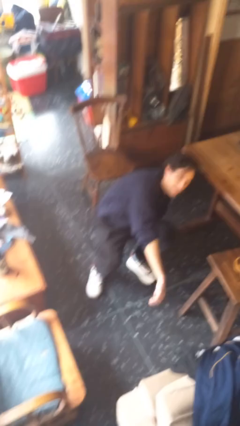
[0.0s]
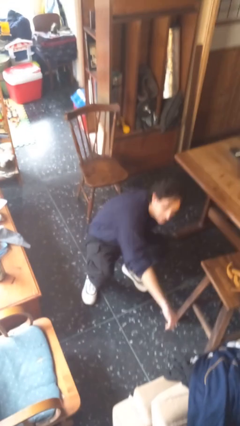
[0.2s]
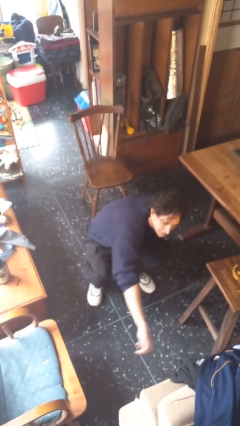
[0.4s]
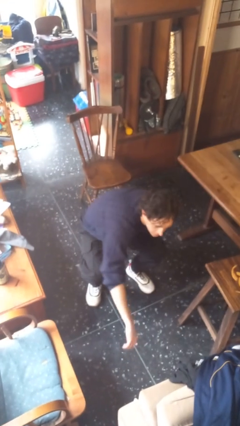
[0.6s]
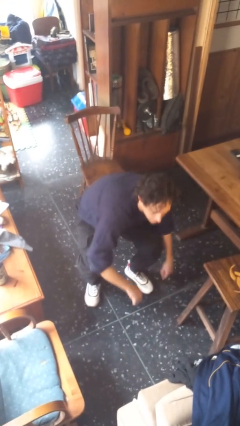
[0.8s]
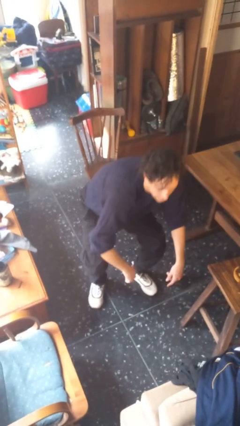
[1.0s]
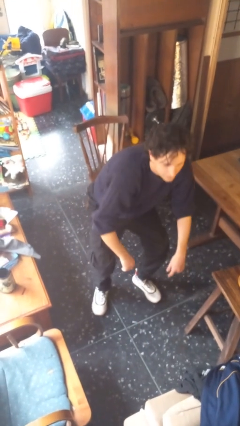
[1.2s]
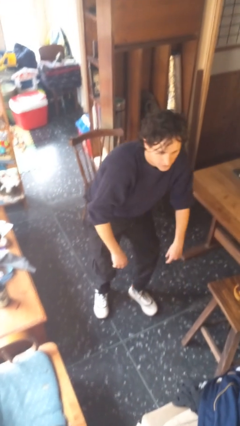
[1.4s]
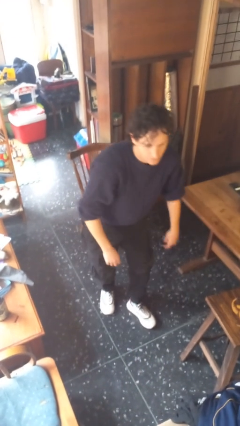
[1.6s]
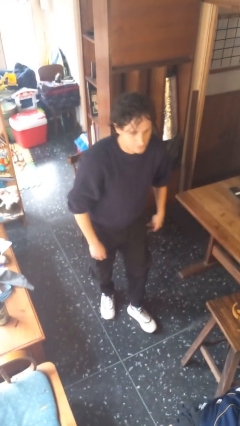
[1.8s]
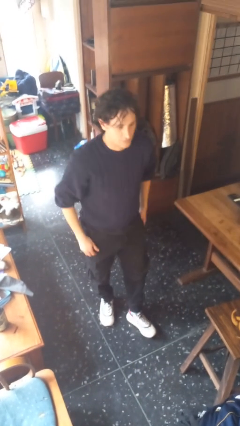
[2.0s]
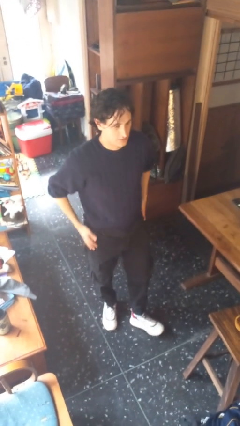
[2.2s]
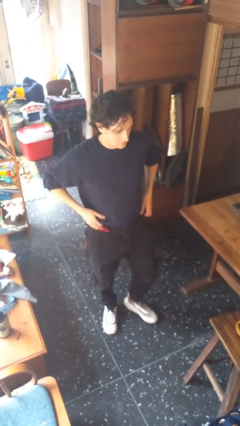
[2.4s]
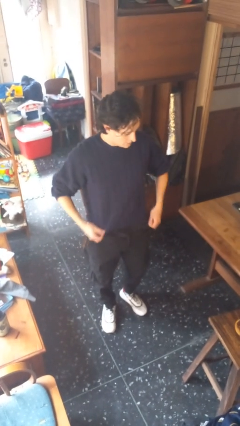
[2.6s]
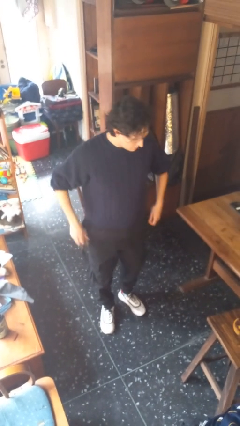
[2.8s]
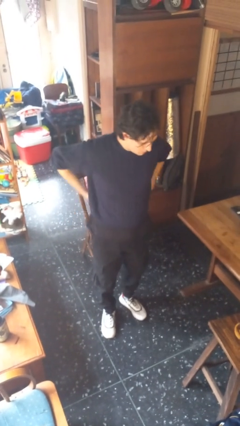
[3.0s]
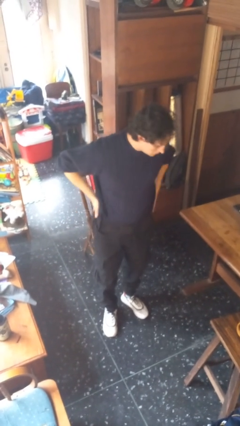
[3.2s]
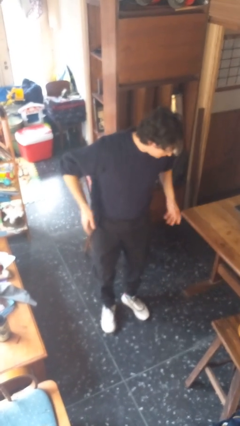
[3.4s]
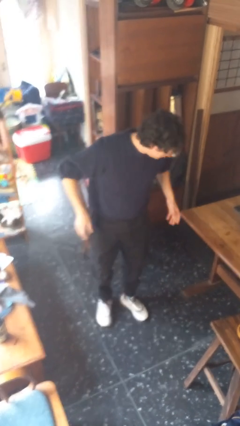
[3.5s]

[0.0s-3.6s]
person stands up from floor

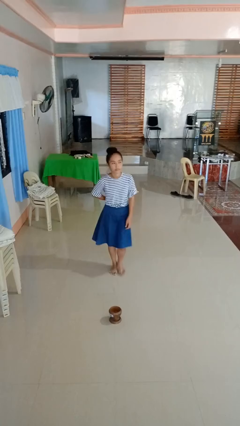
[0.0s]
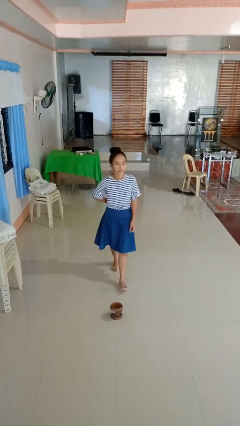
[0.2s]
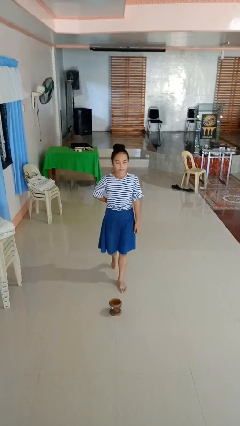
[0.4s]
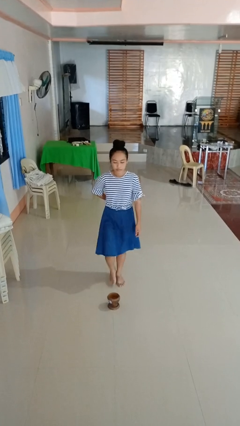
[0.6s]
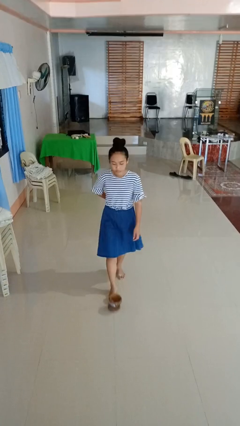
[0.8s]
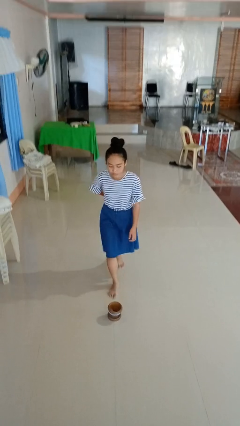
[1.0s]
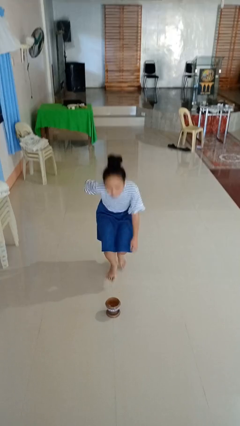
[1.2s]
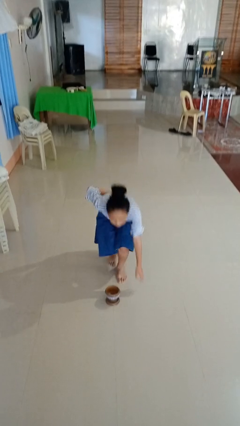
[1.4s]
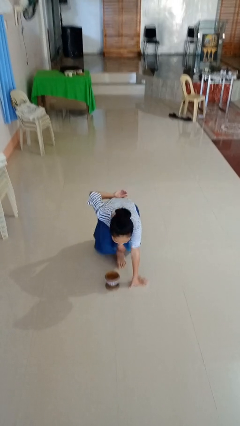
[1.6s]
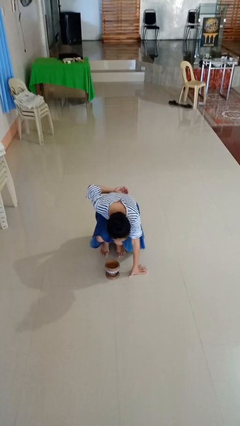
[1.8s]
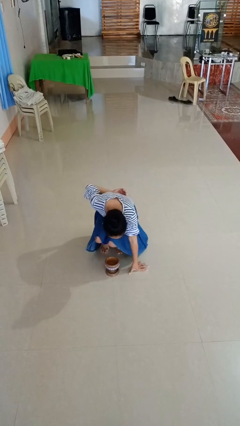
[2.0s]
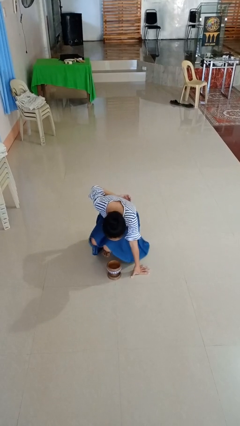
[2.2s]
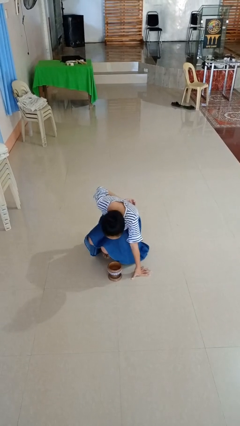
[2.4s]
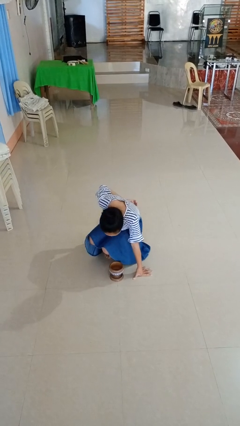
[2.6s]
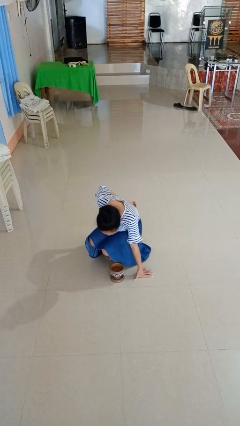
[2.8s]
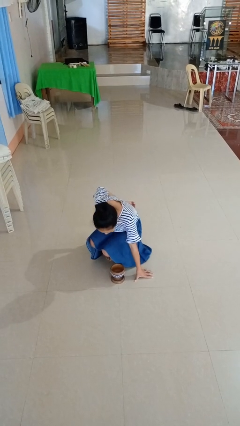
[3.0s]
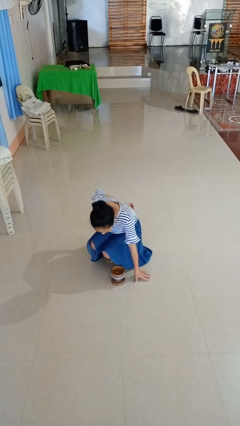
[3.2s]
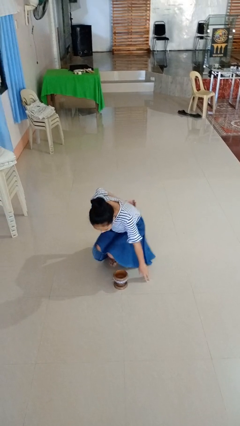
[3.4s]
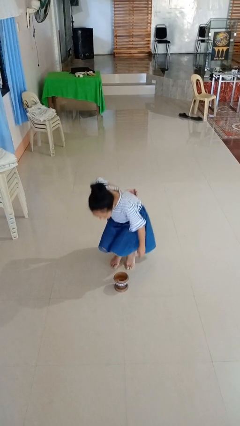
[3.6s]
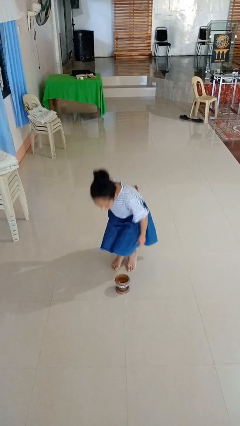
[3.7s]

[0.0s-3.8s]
person trips on object on floor

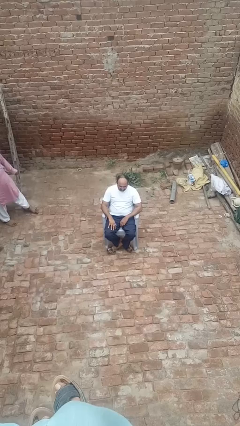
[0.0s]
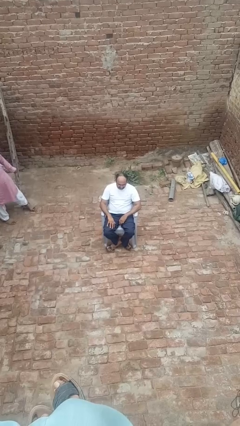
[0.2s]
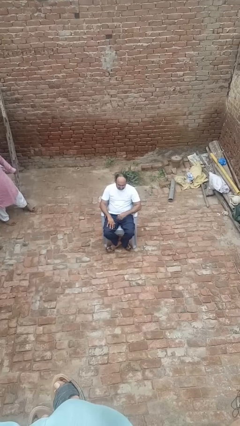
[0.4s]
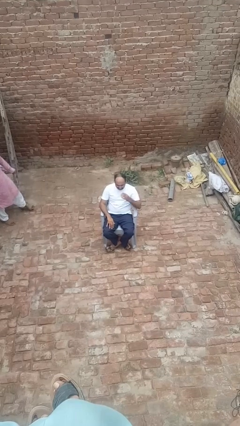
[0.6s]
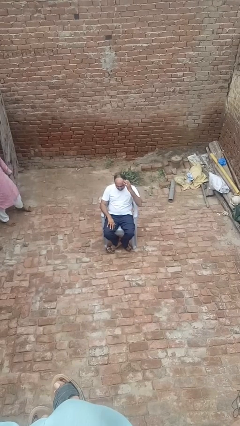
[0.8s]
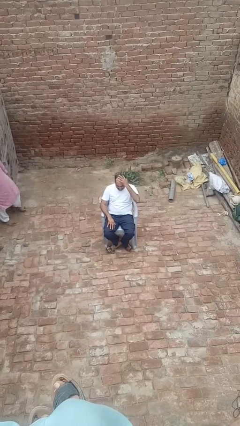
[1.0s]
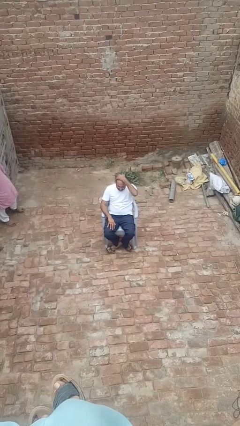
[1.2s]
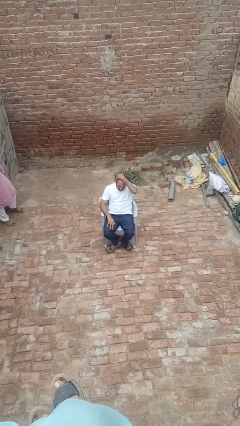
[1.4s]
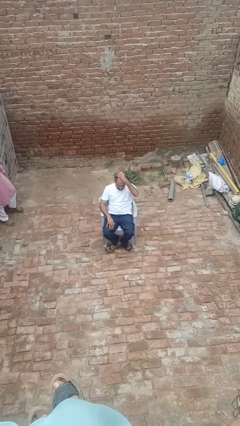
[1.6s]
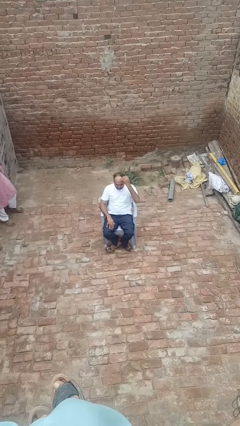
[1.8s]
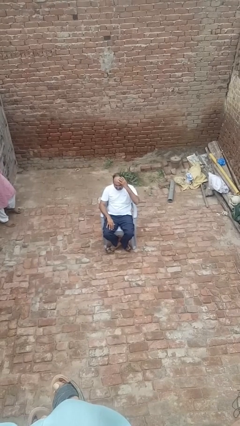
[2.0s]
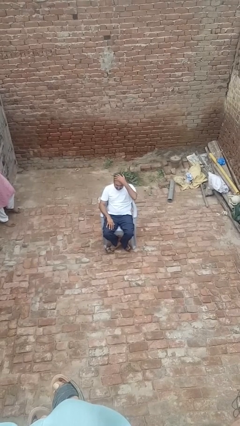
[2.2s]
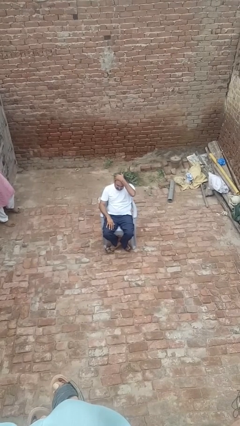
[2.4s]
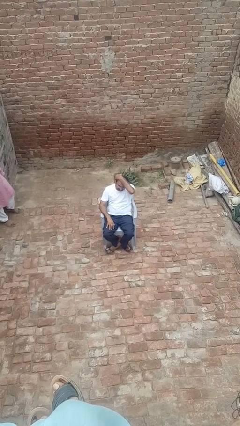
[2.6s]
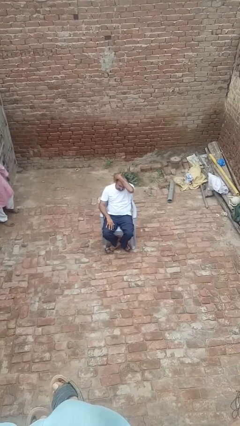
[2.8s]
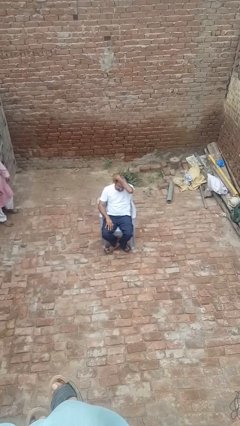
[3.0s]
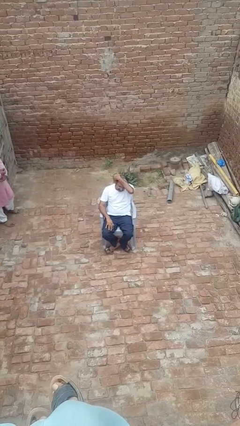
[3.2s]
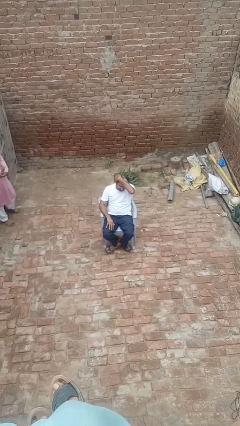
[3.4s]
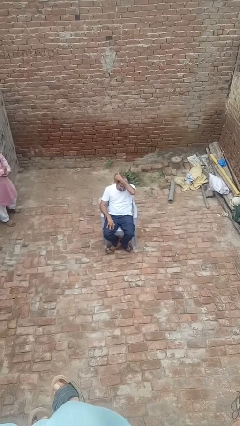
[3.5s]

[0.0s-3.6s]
person strokes hair

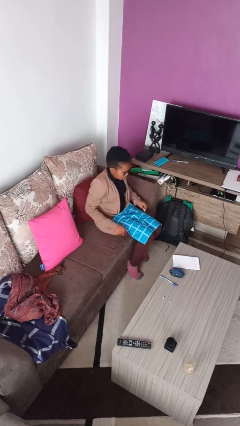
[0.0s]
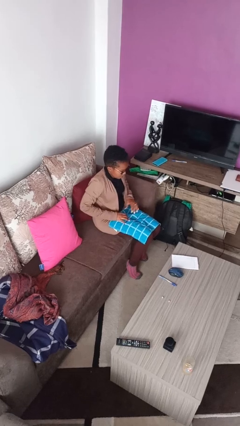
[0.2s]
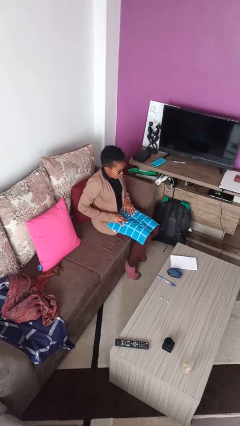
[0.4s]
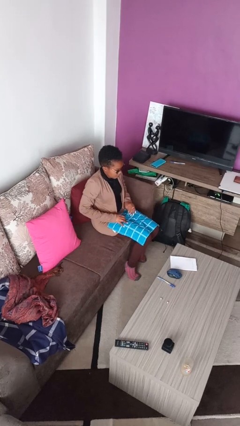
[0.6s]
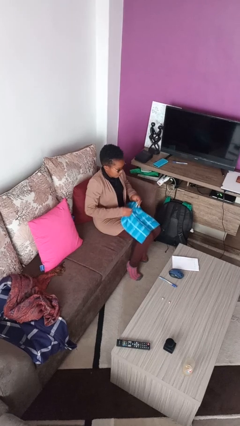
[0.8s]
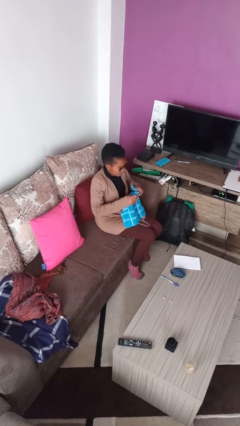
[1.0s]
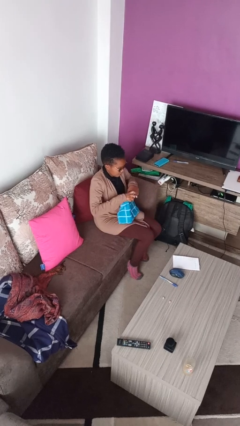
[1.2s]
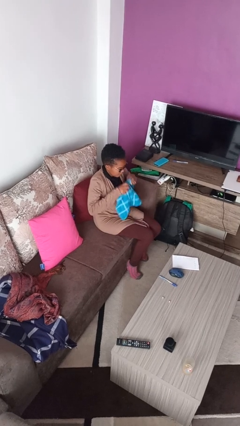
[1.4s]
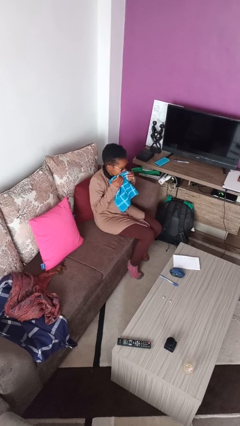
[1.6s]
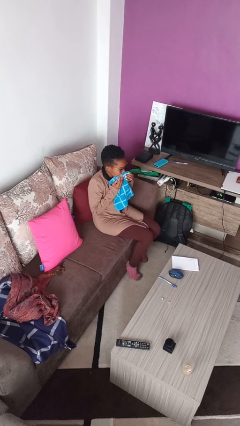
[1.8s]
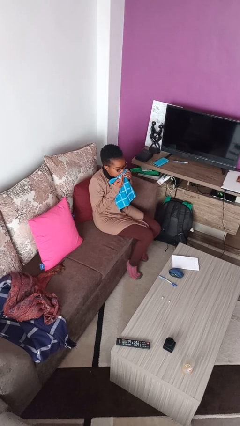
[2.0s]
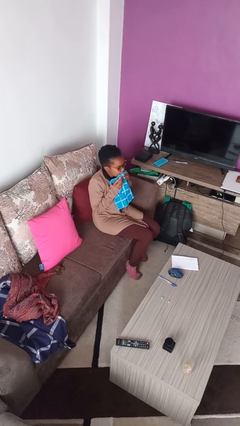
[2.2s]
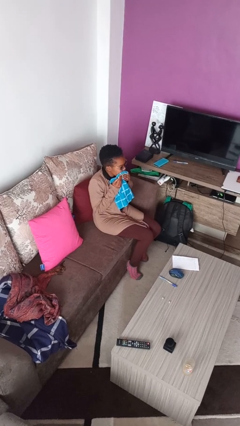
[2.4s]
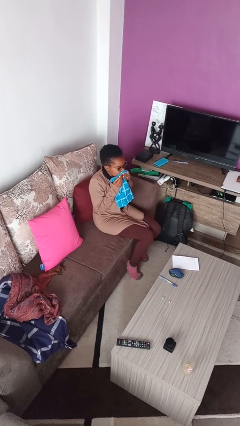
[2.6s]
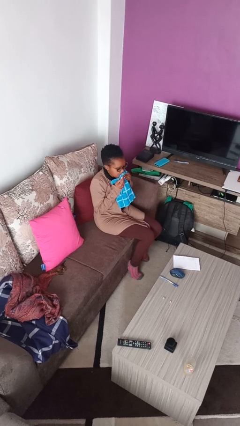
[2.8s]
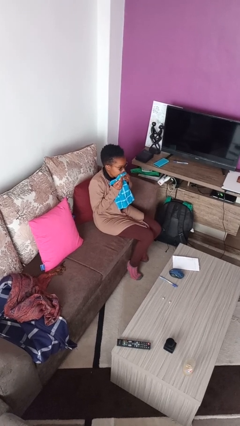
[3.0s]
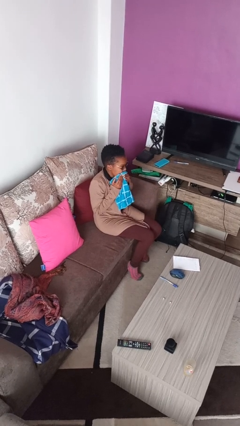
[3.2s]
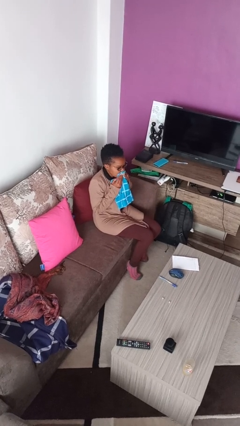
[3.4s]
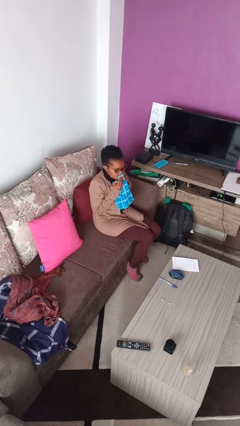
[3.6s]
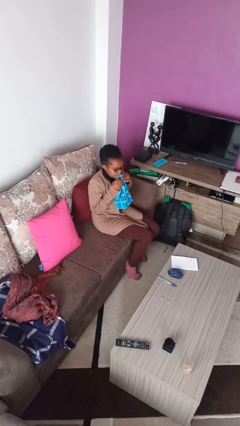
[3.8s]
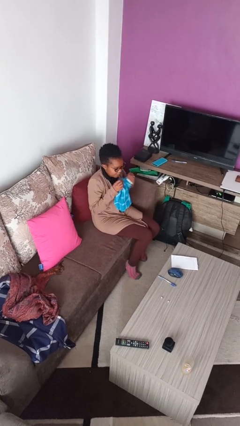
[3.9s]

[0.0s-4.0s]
person wipes mouth with napkin

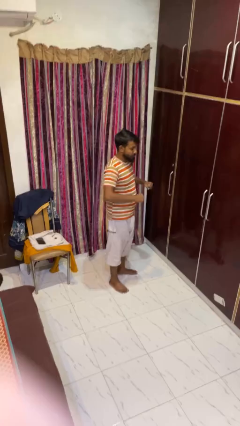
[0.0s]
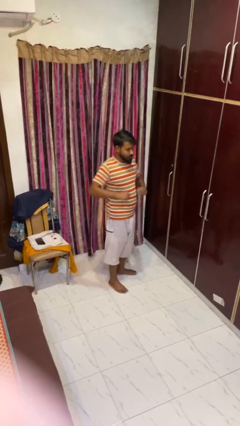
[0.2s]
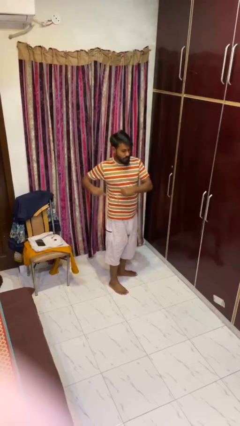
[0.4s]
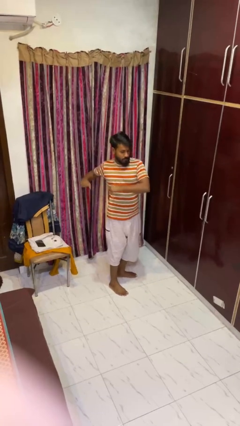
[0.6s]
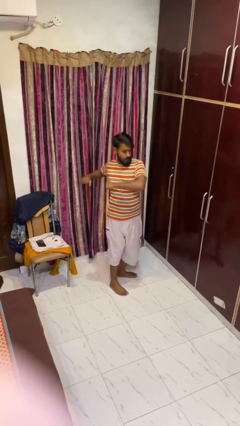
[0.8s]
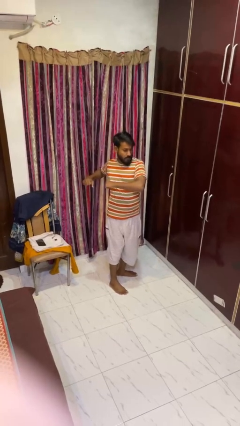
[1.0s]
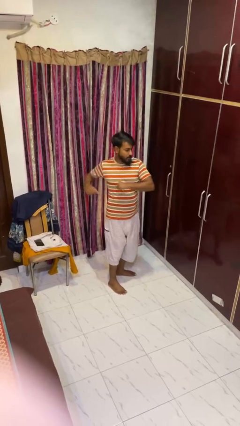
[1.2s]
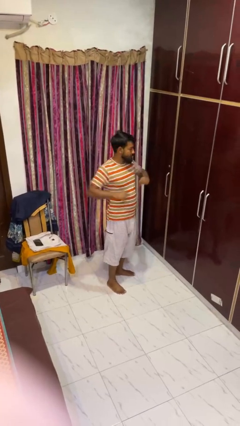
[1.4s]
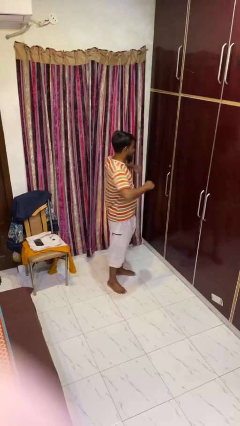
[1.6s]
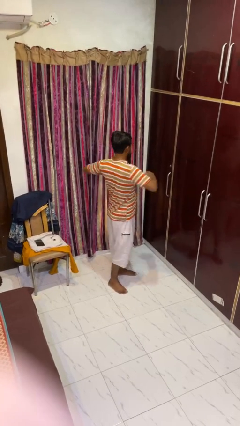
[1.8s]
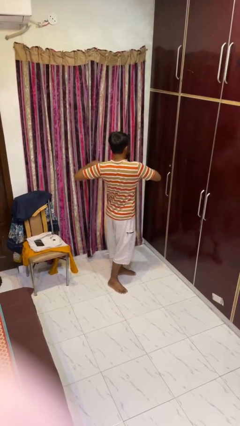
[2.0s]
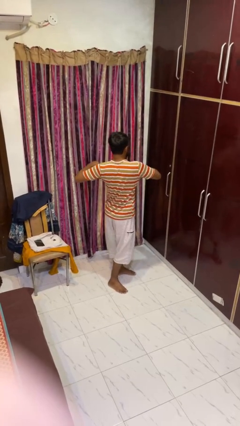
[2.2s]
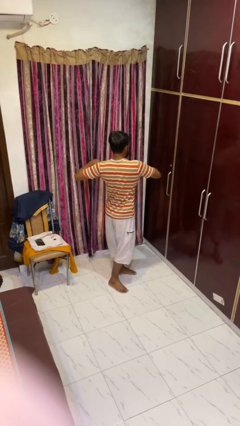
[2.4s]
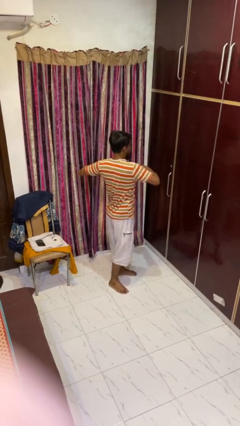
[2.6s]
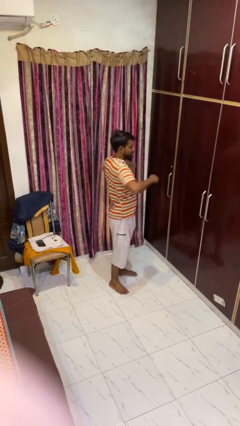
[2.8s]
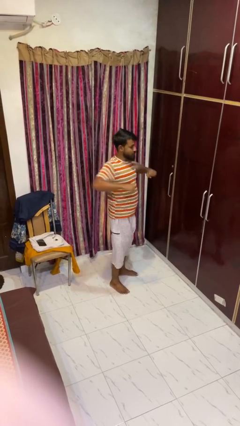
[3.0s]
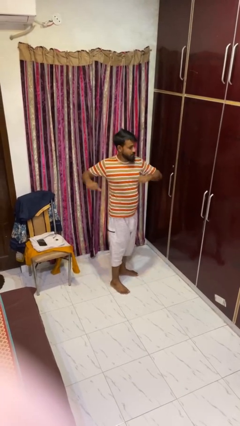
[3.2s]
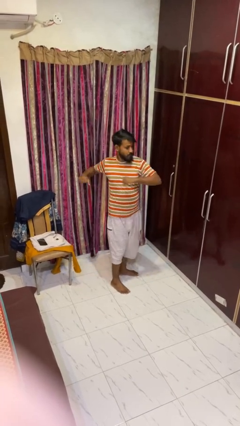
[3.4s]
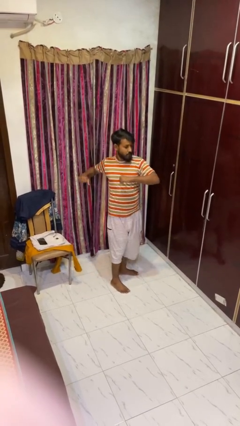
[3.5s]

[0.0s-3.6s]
person stretches arms to side
